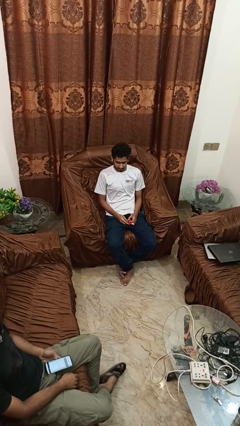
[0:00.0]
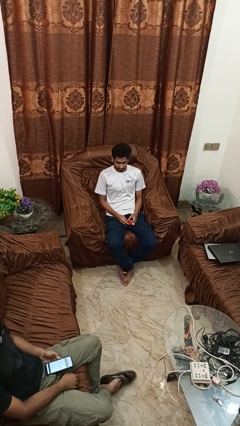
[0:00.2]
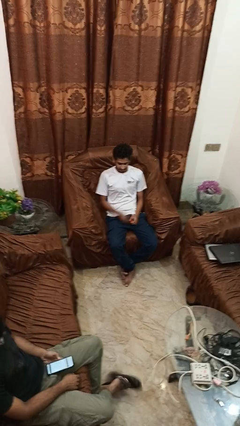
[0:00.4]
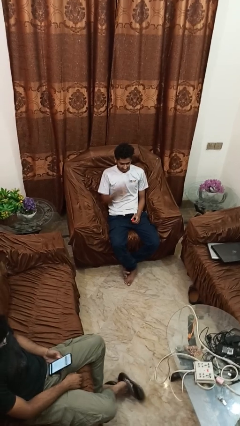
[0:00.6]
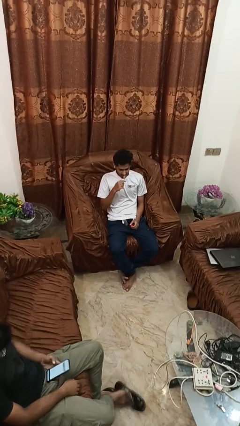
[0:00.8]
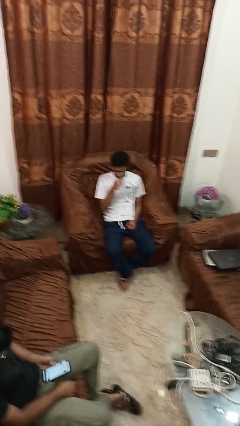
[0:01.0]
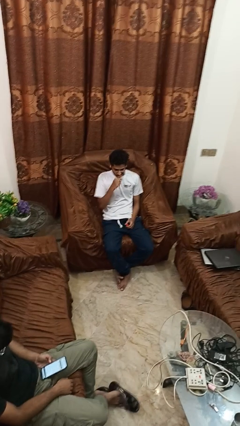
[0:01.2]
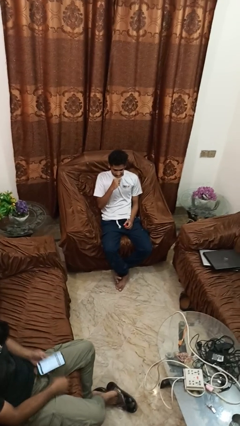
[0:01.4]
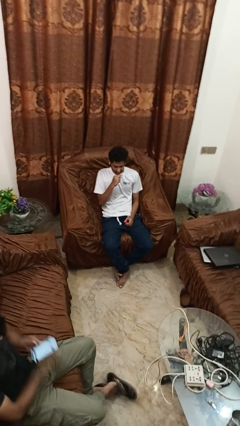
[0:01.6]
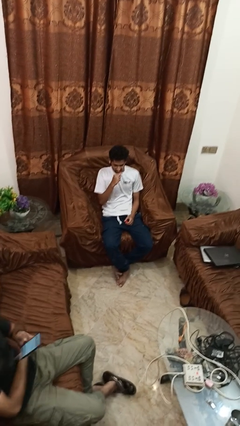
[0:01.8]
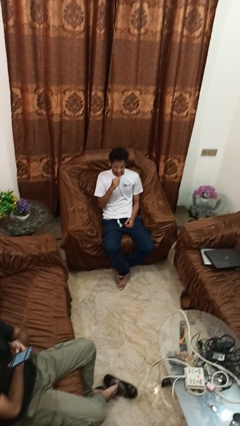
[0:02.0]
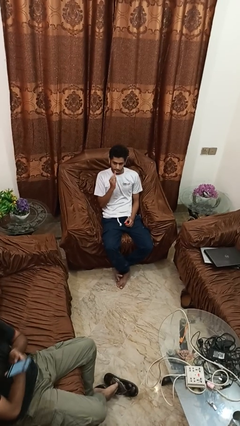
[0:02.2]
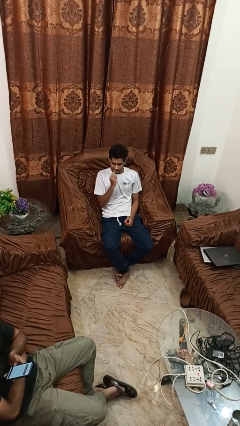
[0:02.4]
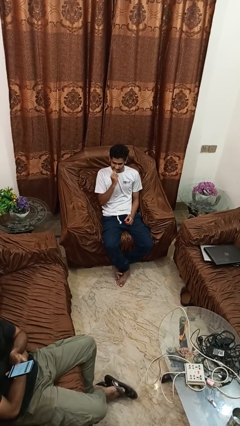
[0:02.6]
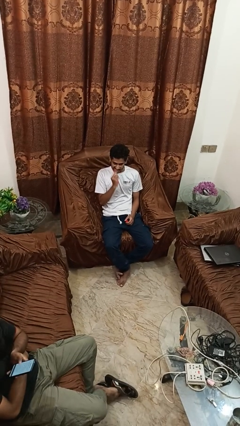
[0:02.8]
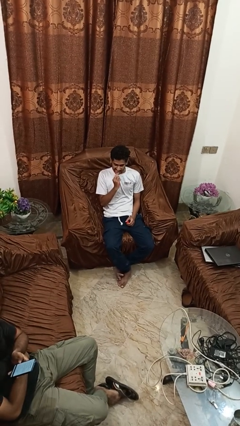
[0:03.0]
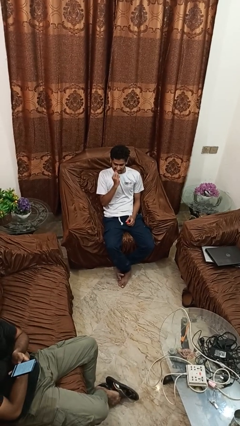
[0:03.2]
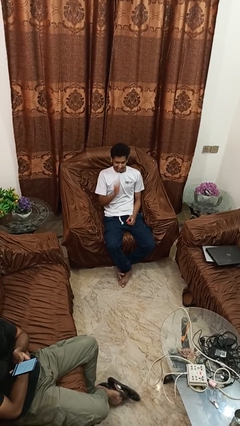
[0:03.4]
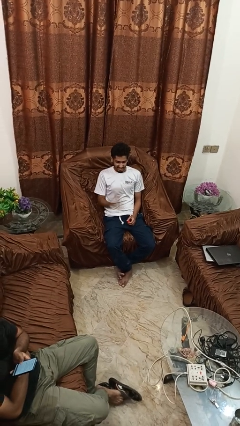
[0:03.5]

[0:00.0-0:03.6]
person brushes teeth

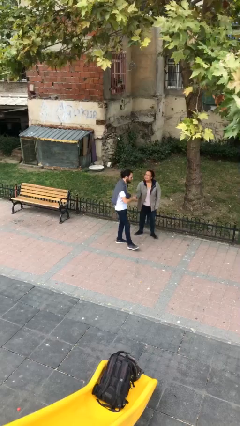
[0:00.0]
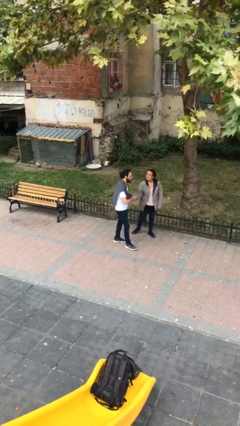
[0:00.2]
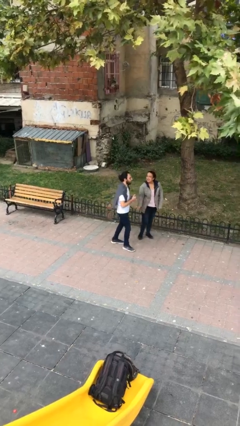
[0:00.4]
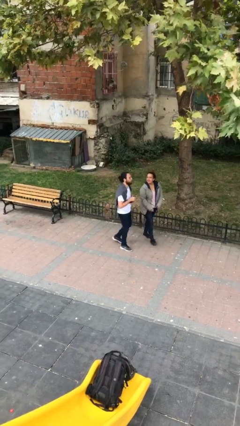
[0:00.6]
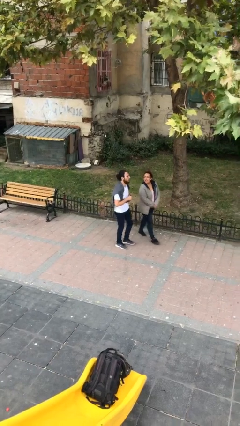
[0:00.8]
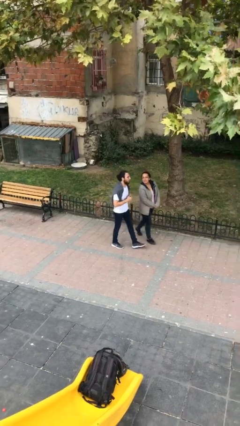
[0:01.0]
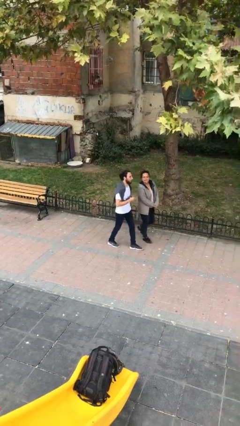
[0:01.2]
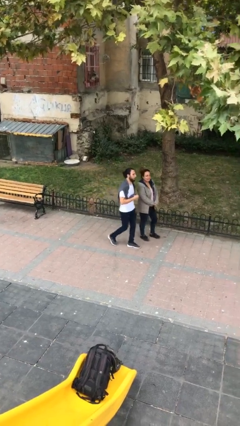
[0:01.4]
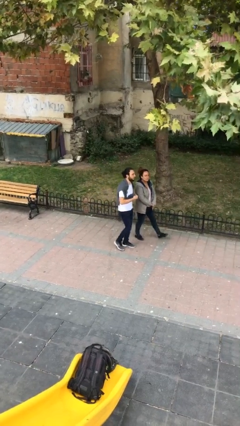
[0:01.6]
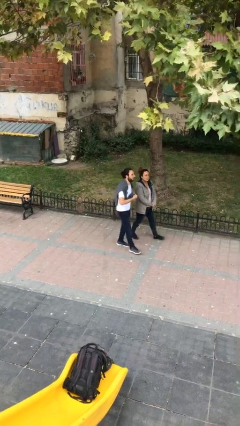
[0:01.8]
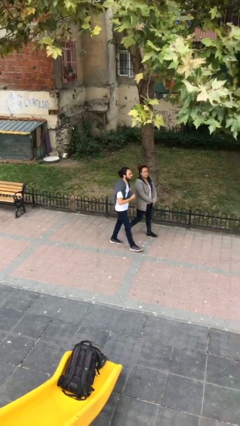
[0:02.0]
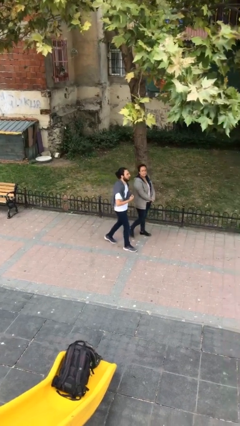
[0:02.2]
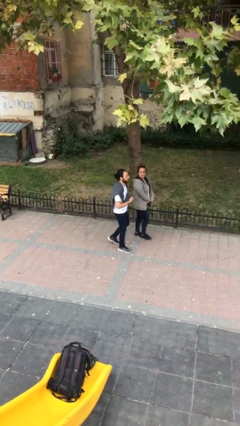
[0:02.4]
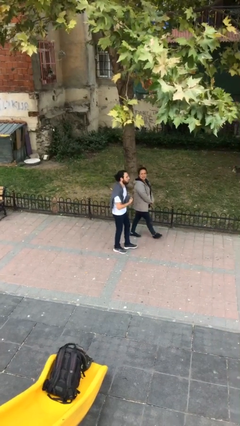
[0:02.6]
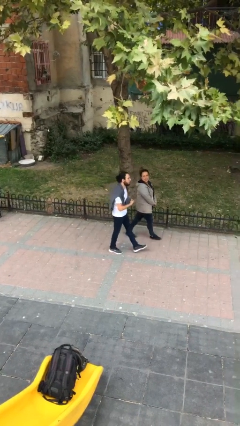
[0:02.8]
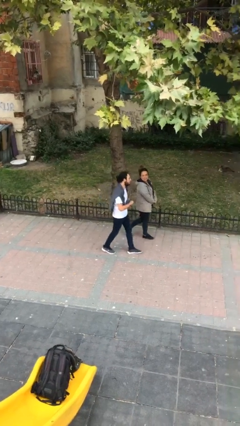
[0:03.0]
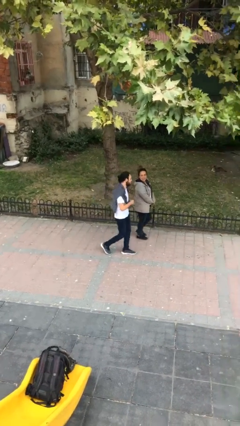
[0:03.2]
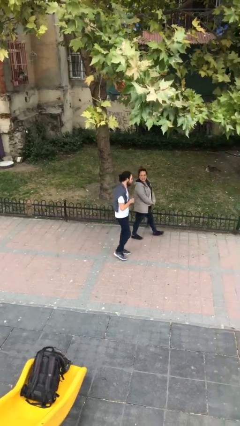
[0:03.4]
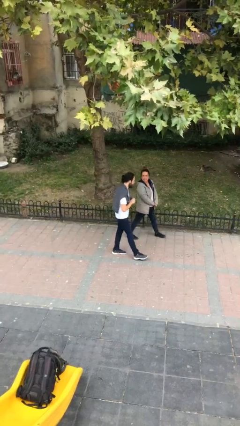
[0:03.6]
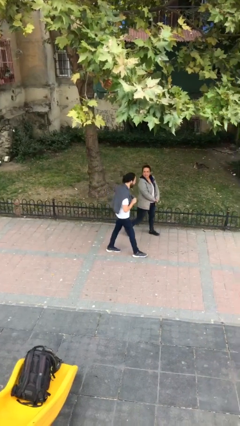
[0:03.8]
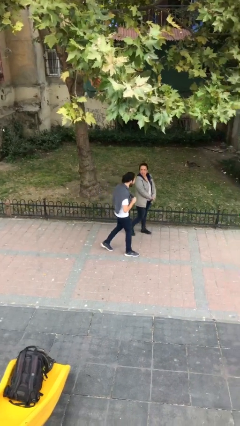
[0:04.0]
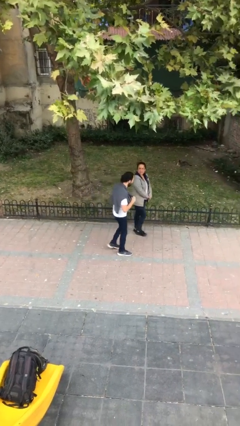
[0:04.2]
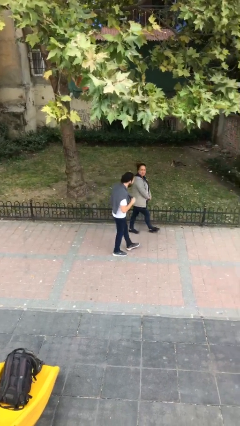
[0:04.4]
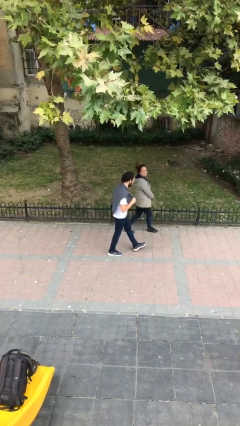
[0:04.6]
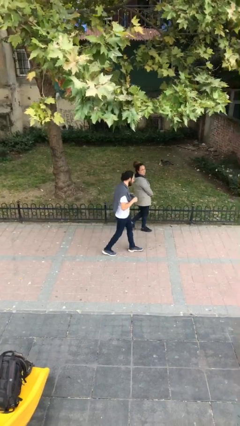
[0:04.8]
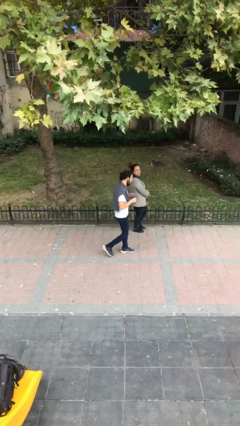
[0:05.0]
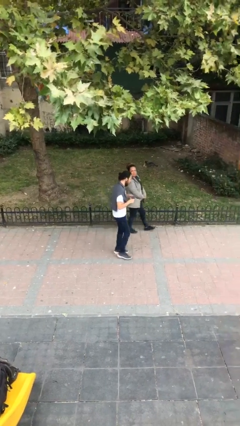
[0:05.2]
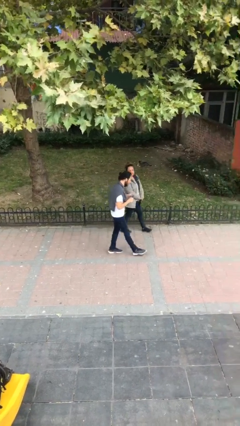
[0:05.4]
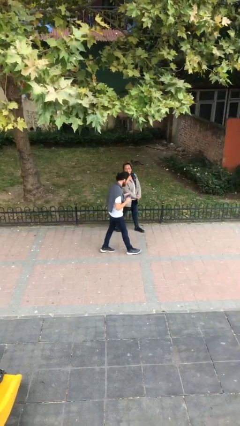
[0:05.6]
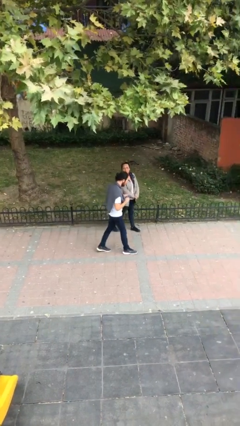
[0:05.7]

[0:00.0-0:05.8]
person talks to person

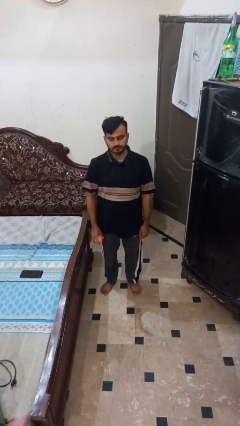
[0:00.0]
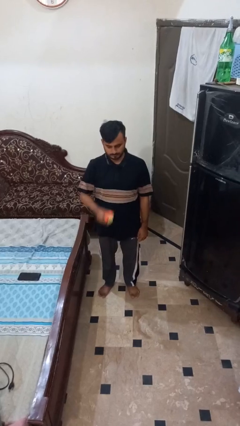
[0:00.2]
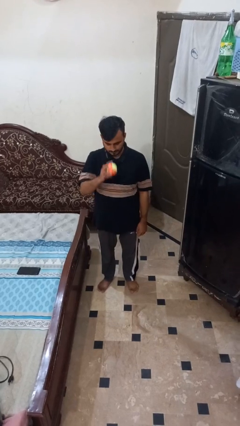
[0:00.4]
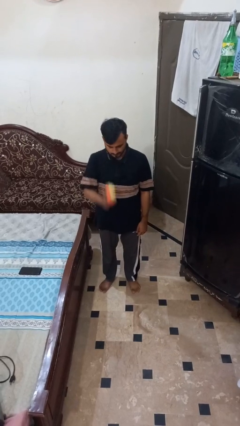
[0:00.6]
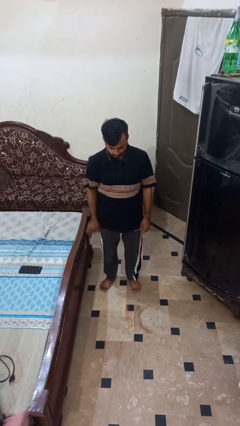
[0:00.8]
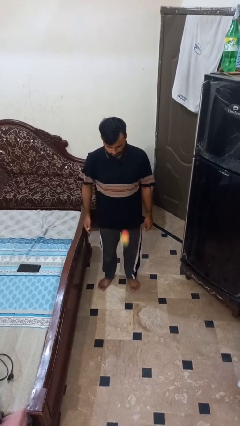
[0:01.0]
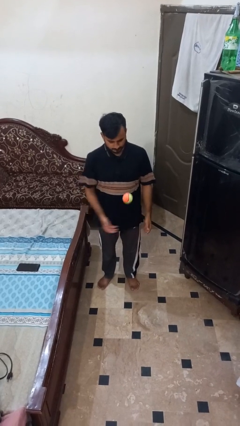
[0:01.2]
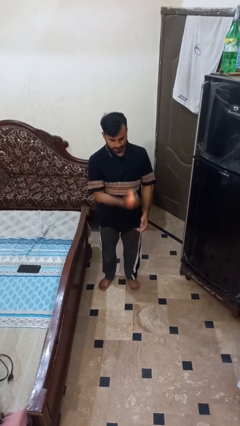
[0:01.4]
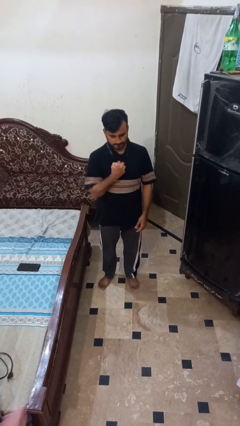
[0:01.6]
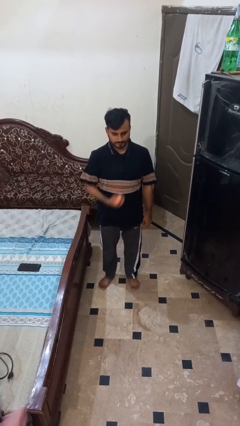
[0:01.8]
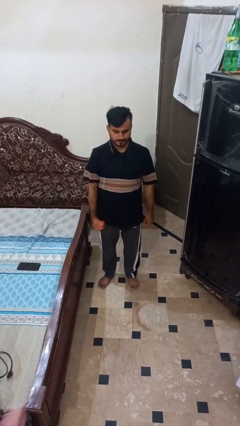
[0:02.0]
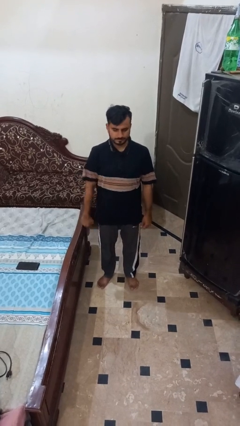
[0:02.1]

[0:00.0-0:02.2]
person bounces ball on floor

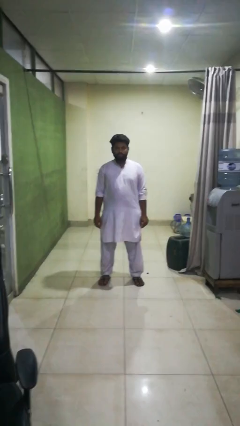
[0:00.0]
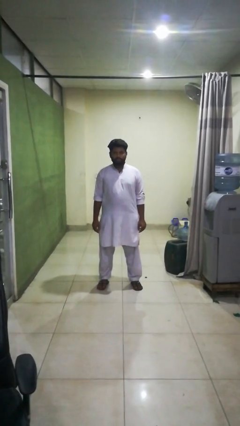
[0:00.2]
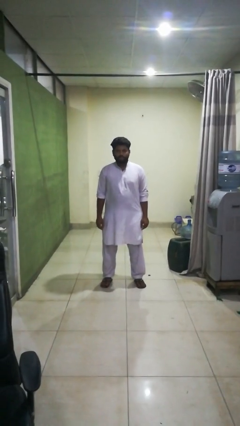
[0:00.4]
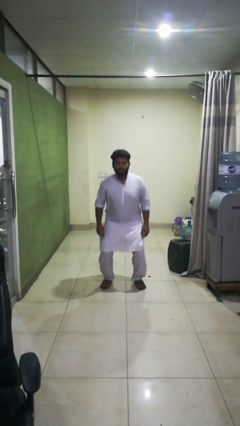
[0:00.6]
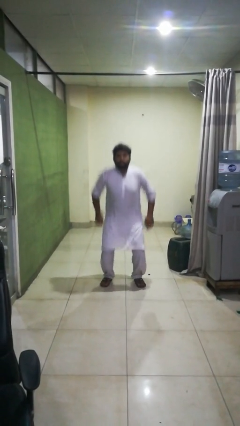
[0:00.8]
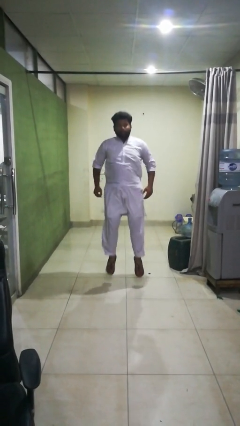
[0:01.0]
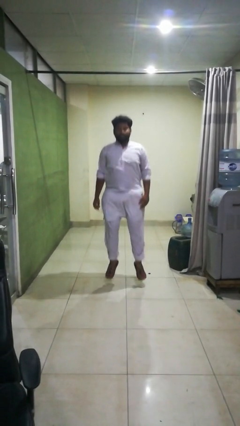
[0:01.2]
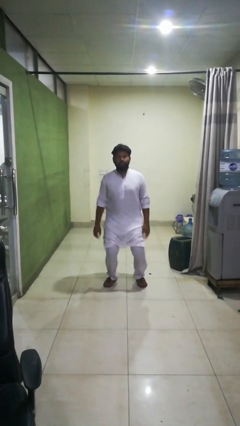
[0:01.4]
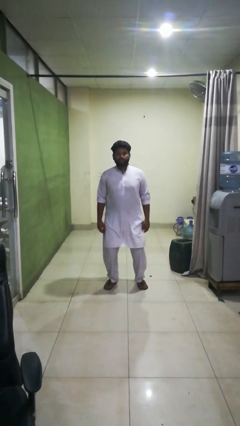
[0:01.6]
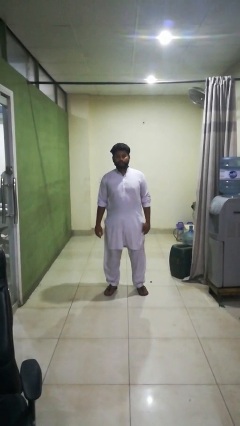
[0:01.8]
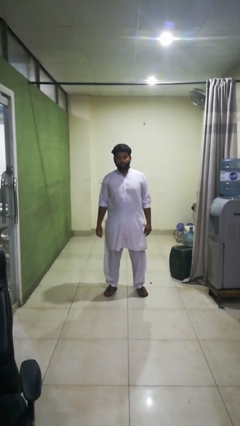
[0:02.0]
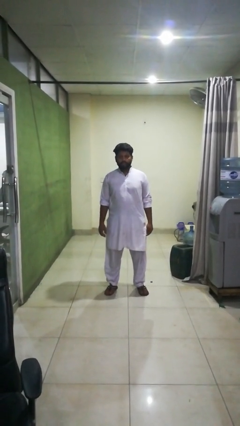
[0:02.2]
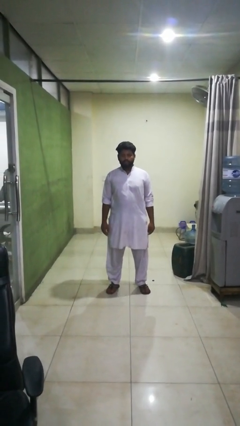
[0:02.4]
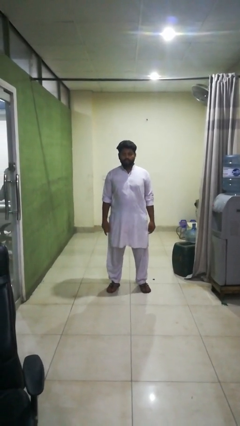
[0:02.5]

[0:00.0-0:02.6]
person jumps

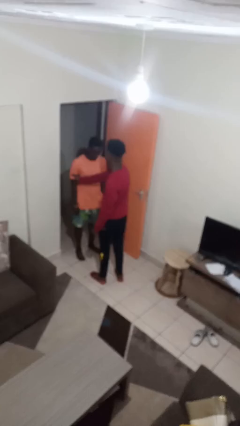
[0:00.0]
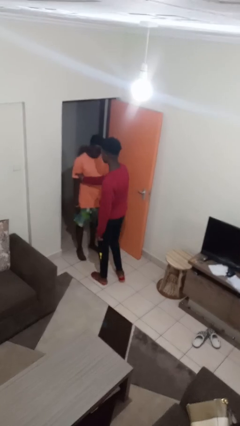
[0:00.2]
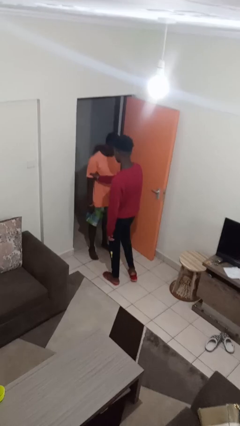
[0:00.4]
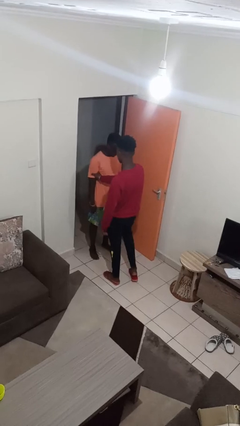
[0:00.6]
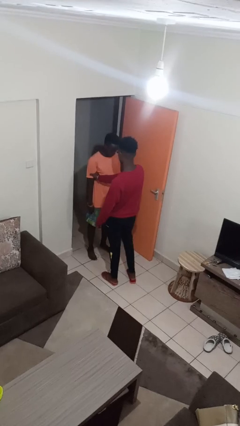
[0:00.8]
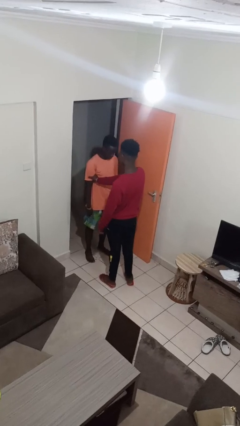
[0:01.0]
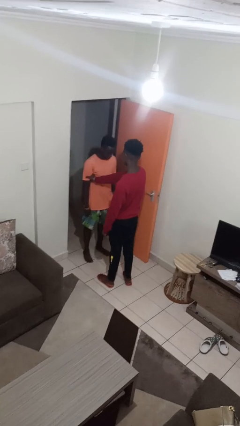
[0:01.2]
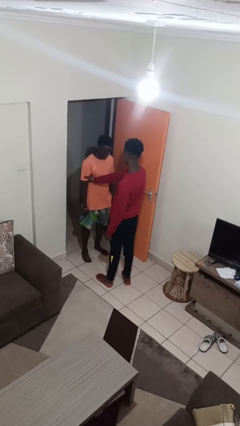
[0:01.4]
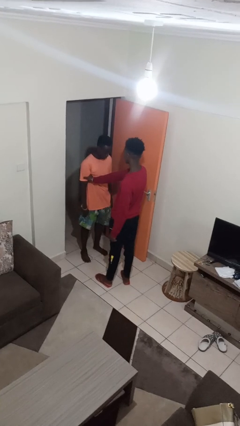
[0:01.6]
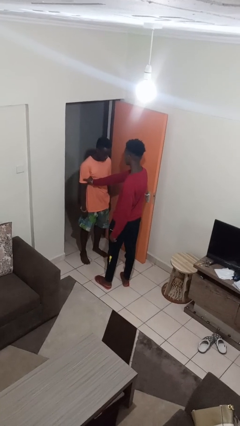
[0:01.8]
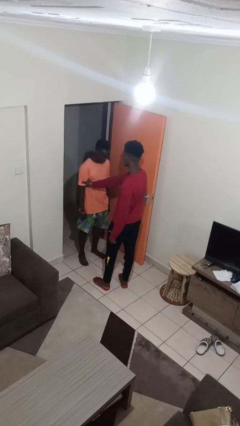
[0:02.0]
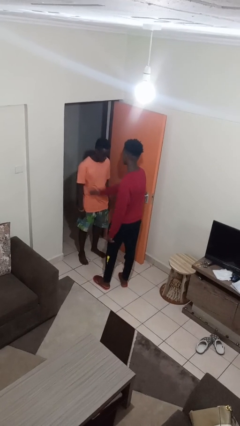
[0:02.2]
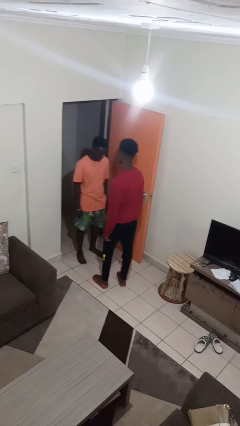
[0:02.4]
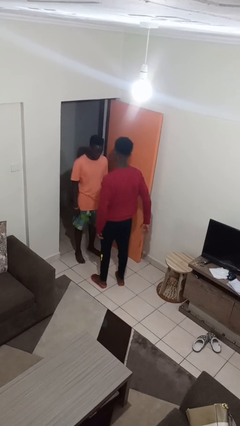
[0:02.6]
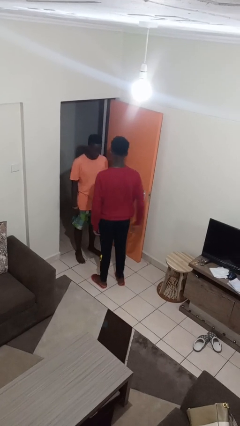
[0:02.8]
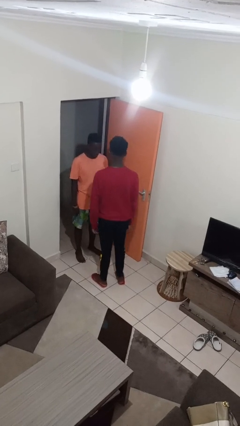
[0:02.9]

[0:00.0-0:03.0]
person grabs person by bicep

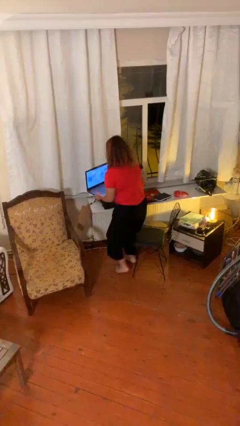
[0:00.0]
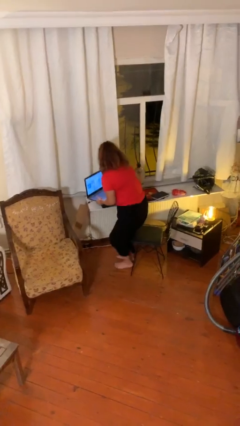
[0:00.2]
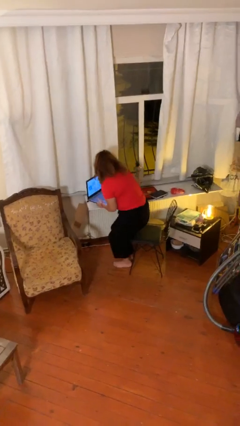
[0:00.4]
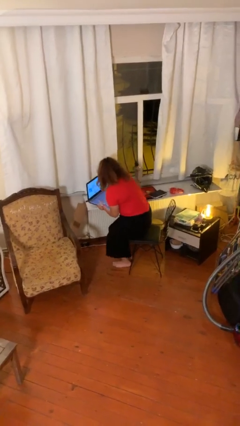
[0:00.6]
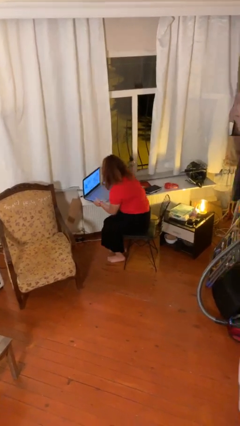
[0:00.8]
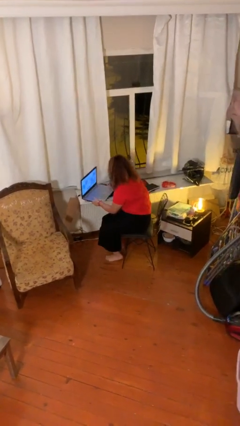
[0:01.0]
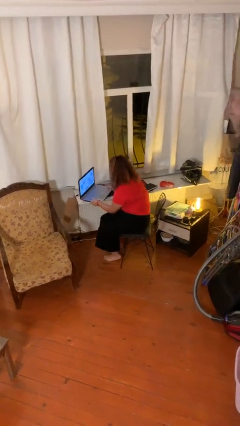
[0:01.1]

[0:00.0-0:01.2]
person sits down
